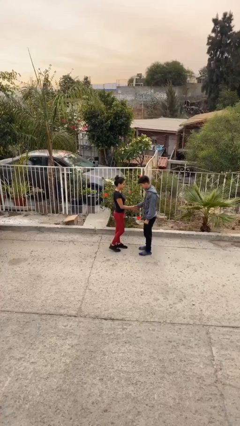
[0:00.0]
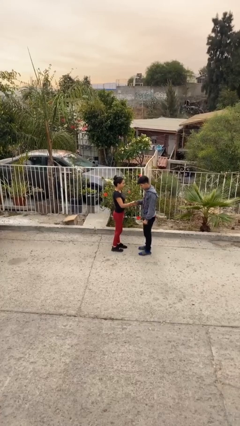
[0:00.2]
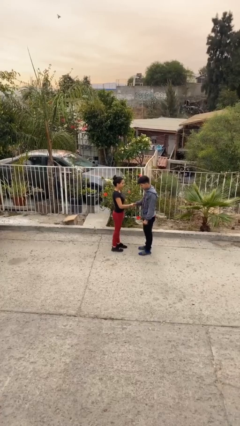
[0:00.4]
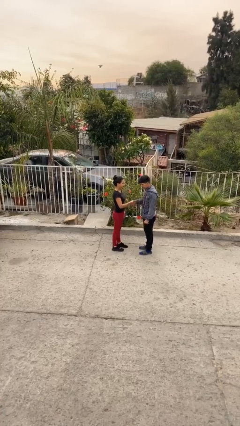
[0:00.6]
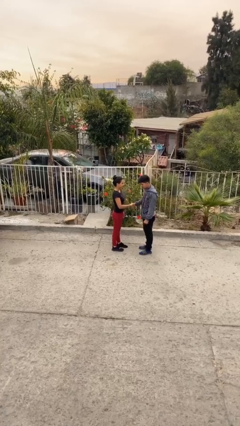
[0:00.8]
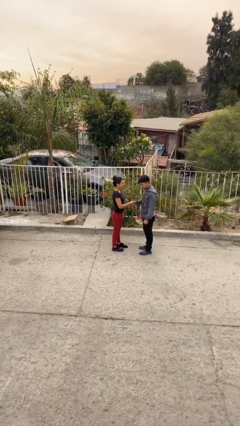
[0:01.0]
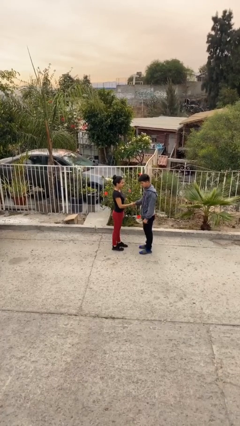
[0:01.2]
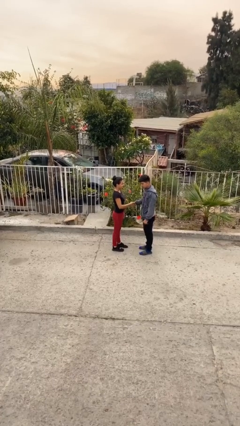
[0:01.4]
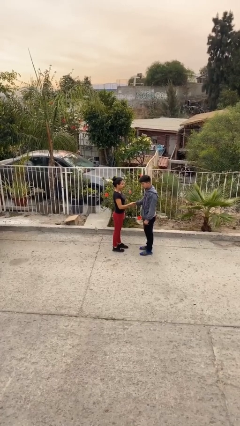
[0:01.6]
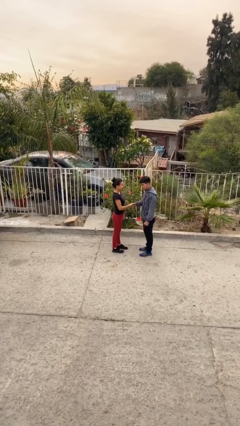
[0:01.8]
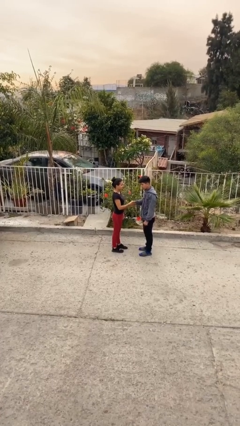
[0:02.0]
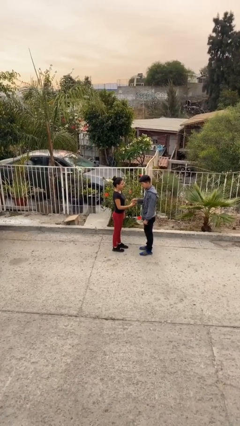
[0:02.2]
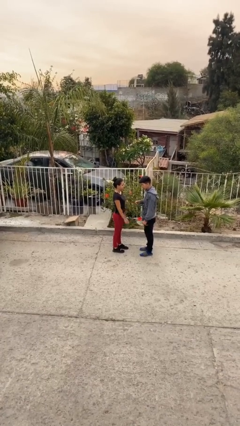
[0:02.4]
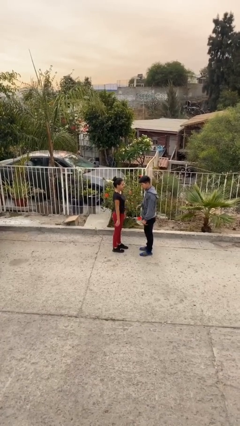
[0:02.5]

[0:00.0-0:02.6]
person shakes hand

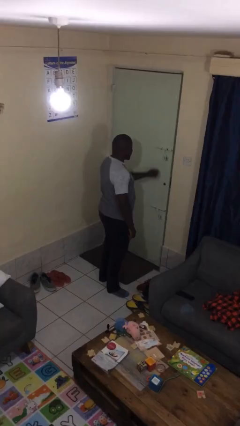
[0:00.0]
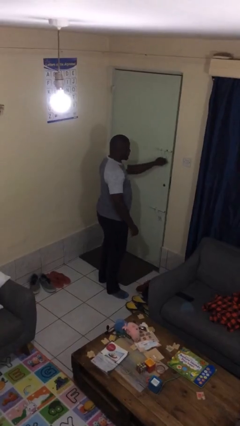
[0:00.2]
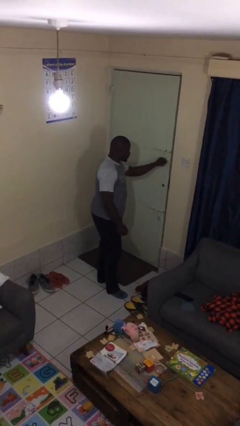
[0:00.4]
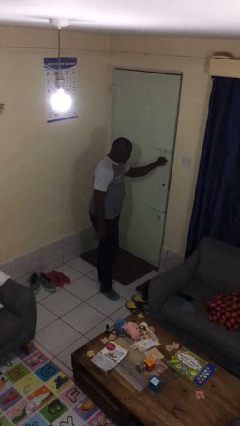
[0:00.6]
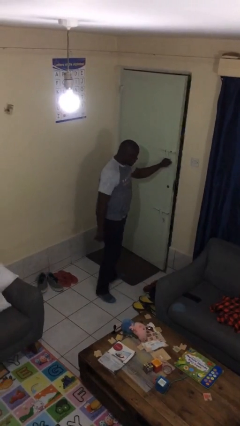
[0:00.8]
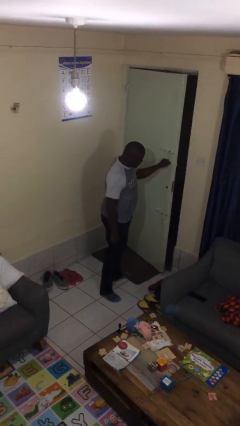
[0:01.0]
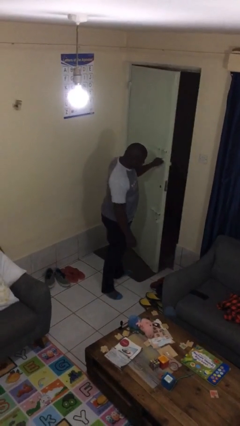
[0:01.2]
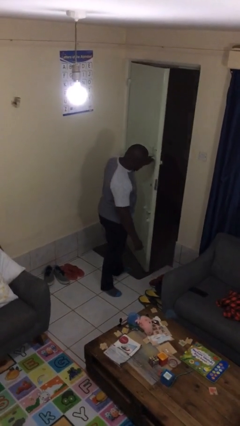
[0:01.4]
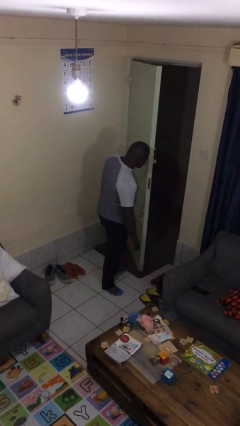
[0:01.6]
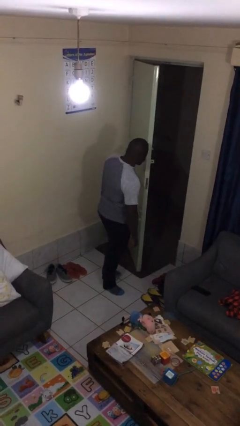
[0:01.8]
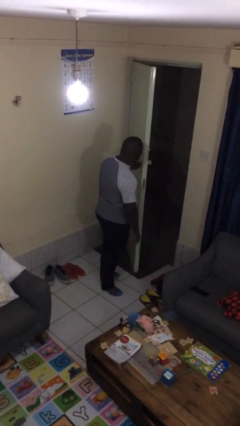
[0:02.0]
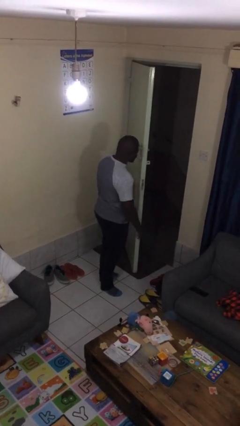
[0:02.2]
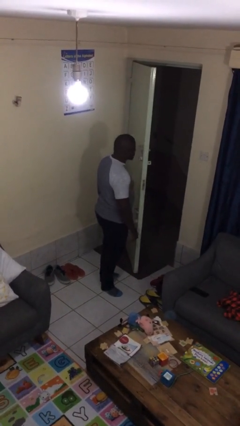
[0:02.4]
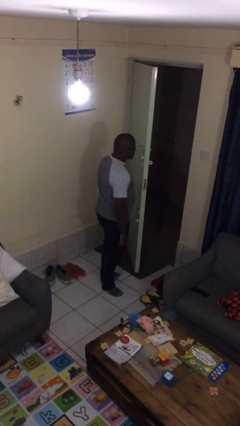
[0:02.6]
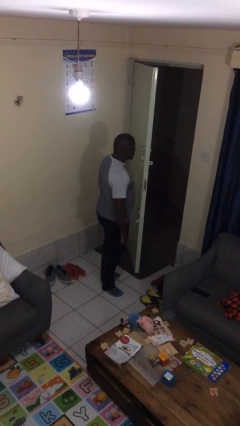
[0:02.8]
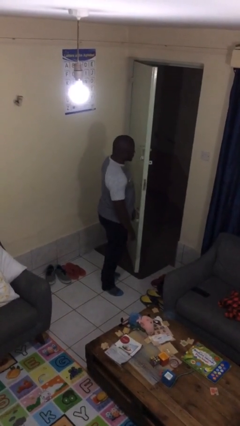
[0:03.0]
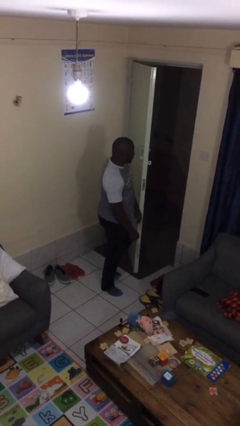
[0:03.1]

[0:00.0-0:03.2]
person opens facility door

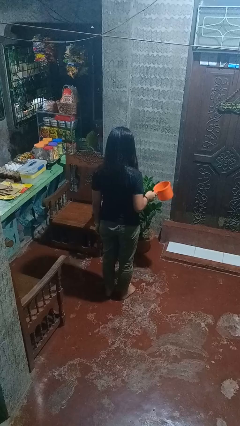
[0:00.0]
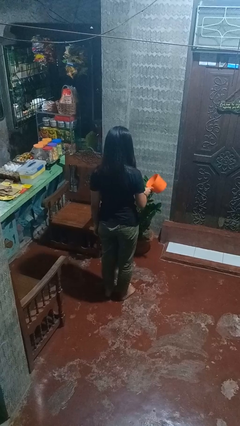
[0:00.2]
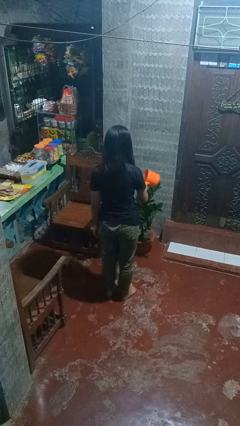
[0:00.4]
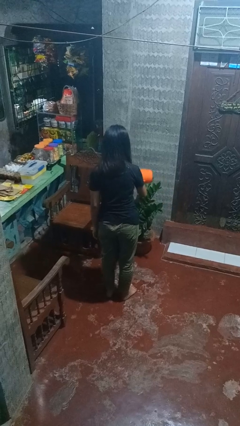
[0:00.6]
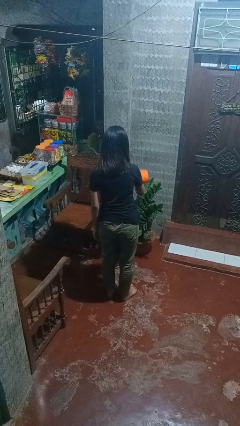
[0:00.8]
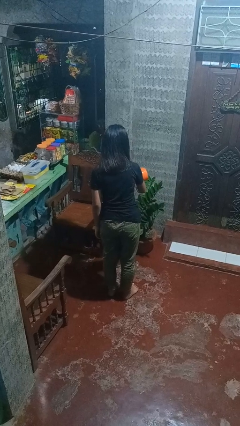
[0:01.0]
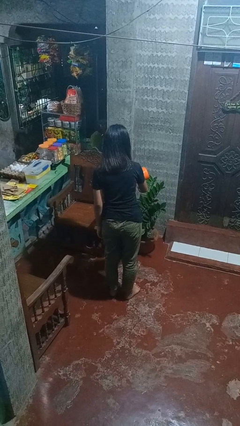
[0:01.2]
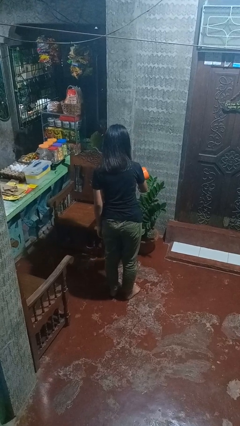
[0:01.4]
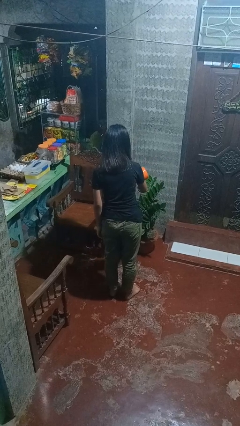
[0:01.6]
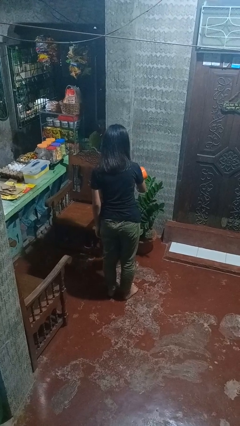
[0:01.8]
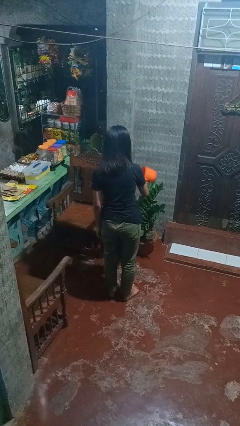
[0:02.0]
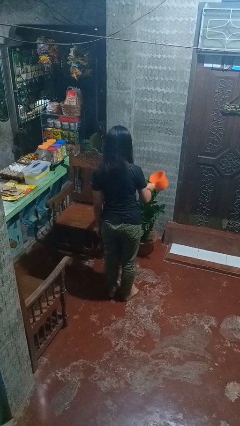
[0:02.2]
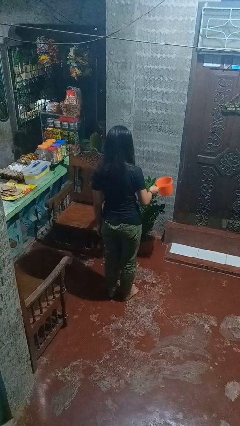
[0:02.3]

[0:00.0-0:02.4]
person waters houseplant

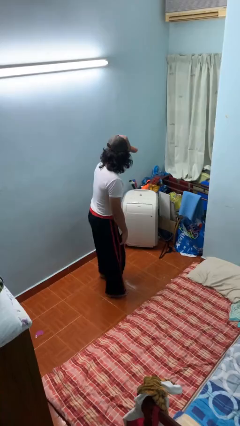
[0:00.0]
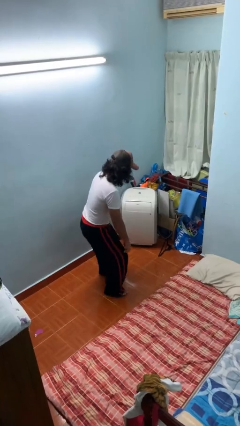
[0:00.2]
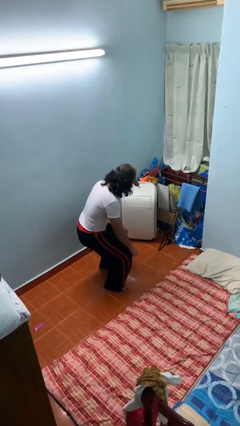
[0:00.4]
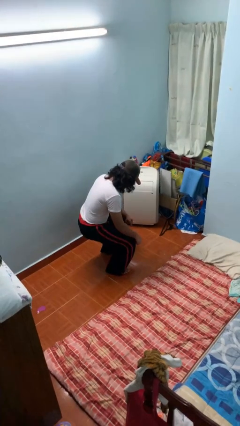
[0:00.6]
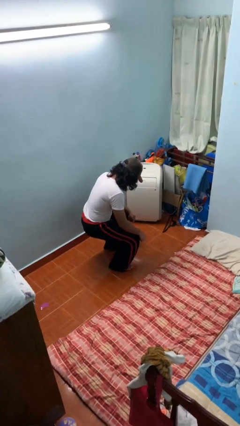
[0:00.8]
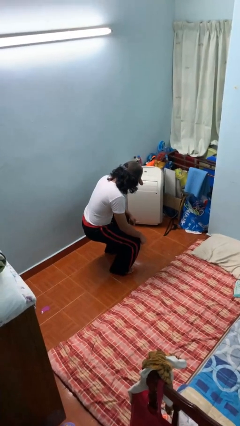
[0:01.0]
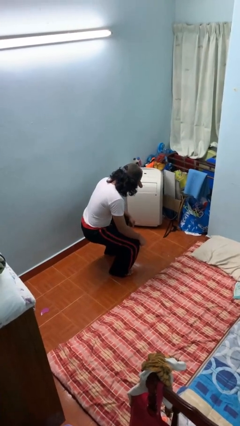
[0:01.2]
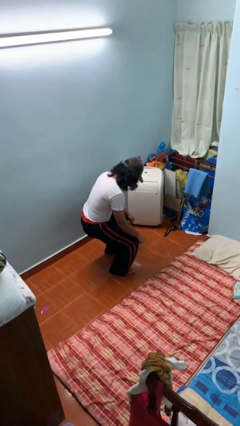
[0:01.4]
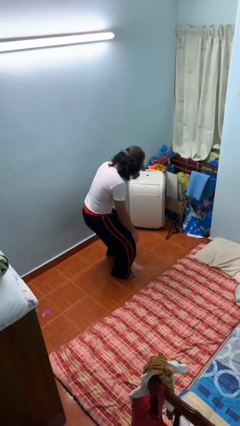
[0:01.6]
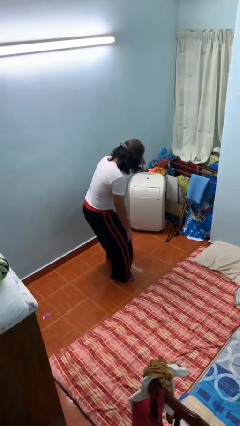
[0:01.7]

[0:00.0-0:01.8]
person squats

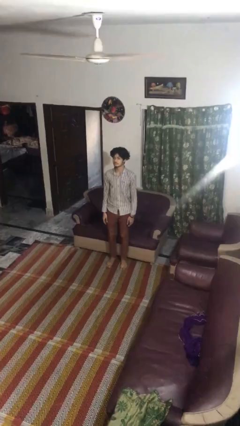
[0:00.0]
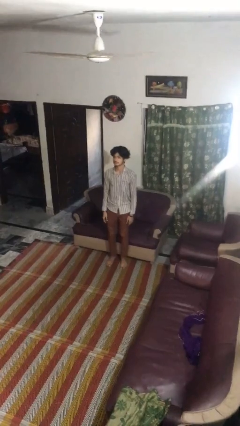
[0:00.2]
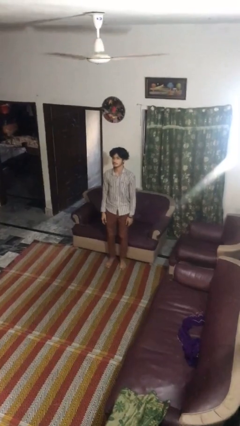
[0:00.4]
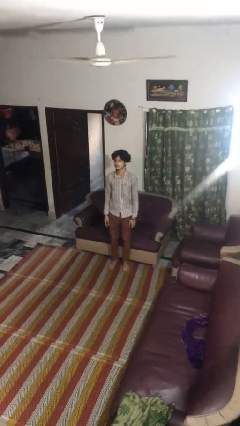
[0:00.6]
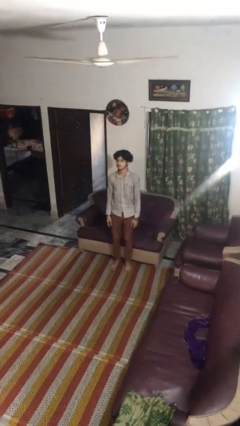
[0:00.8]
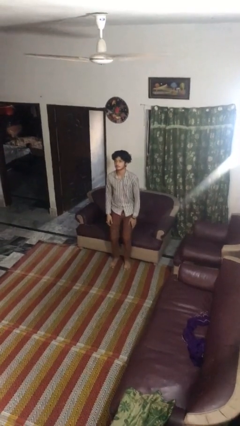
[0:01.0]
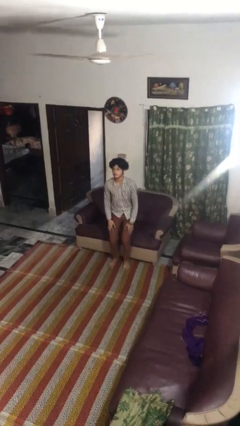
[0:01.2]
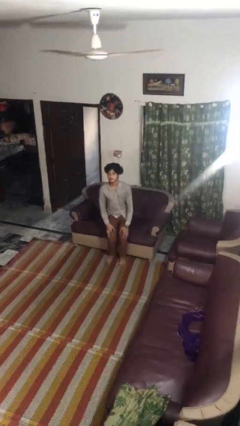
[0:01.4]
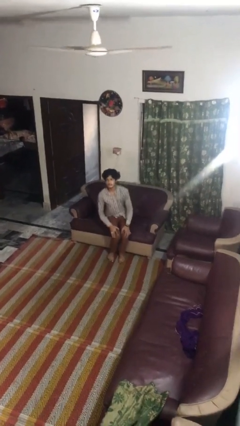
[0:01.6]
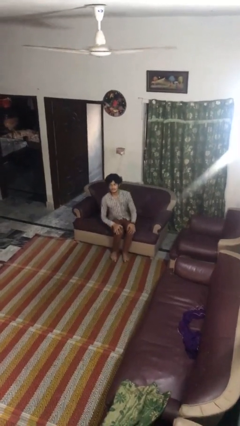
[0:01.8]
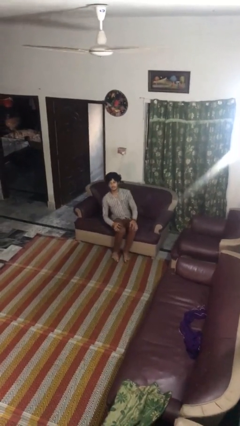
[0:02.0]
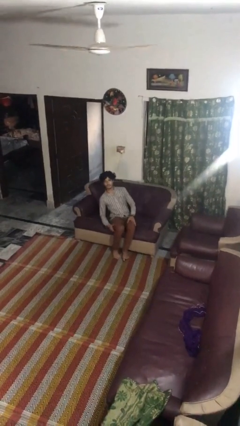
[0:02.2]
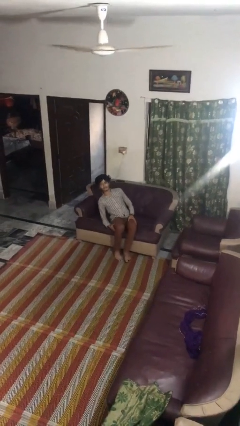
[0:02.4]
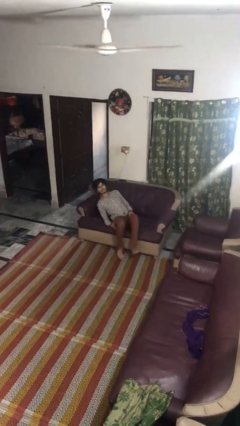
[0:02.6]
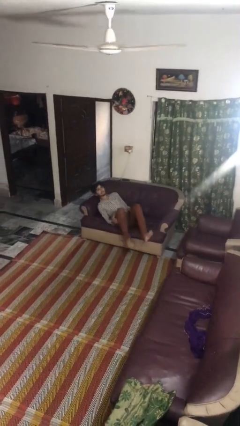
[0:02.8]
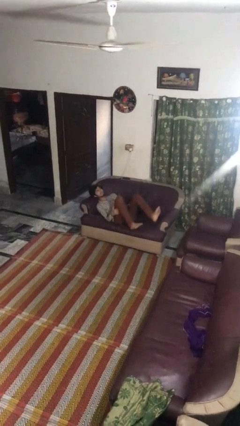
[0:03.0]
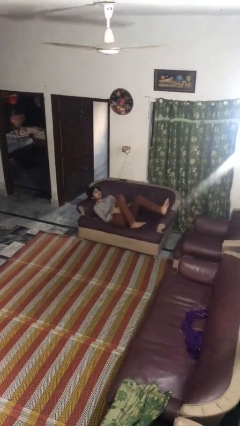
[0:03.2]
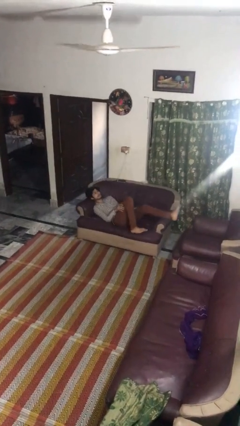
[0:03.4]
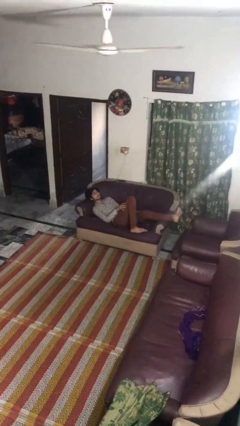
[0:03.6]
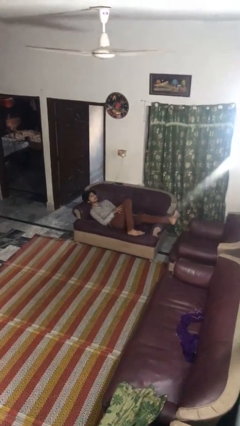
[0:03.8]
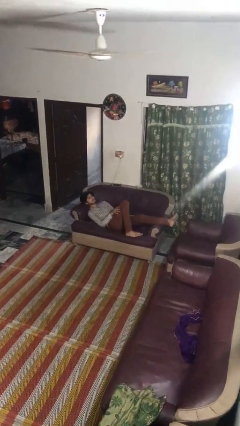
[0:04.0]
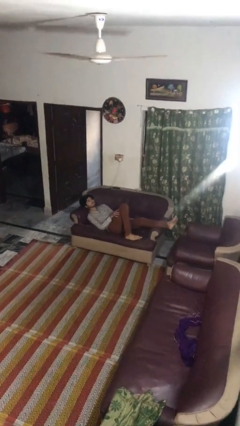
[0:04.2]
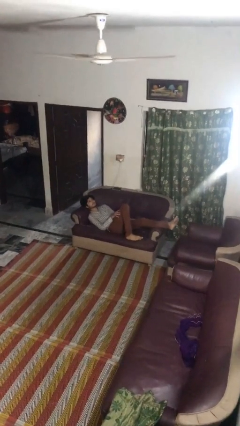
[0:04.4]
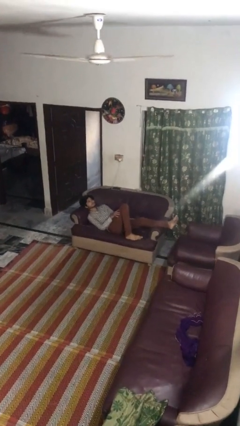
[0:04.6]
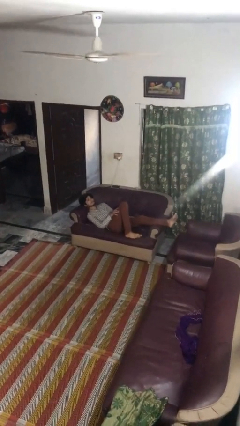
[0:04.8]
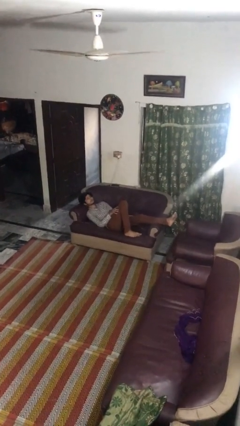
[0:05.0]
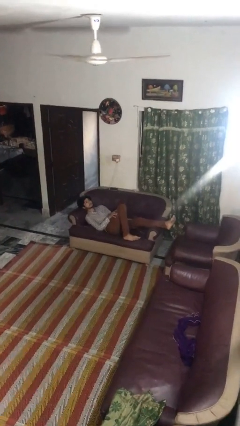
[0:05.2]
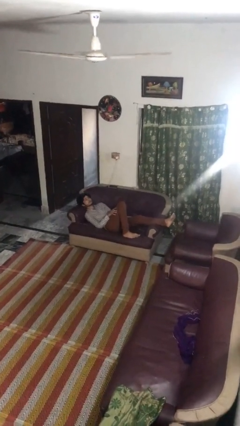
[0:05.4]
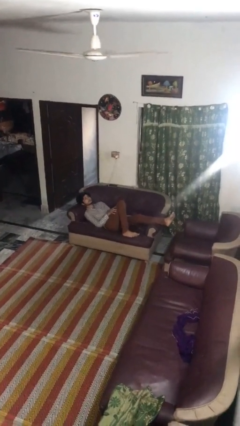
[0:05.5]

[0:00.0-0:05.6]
person lies down on couch

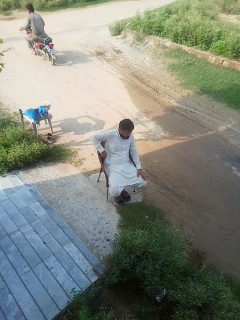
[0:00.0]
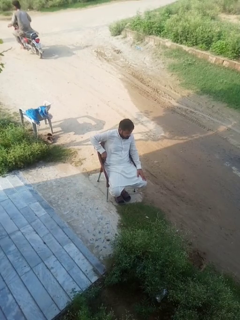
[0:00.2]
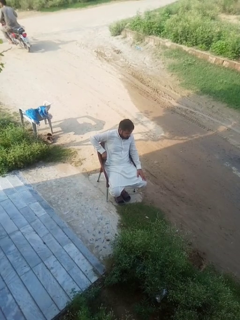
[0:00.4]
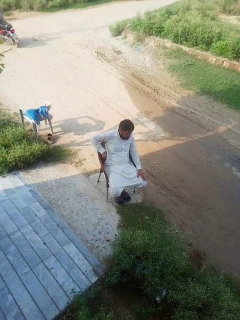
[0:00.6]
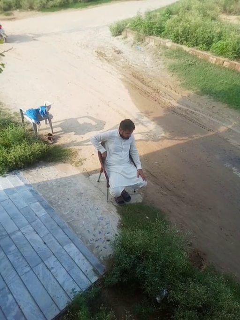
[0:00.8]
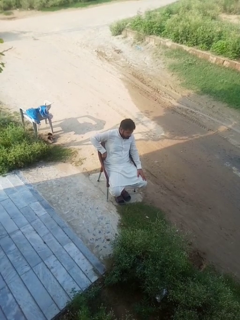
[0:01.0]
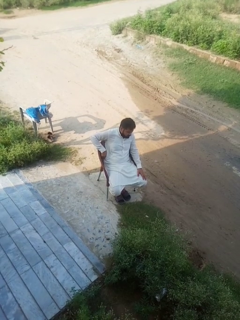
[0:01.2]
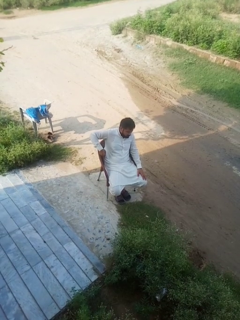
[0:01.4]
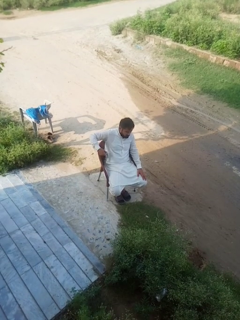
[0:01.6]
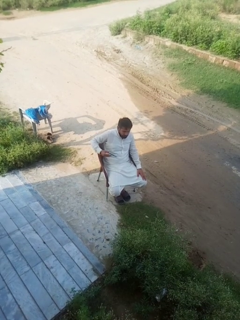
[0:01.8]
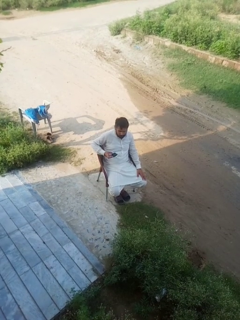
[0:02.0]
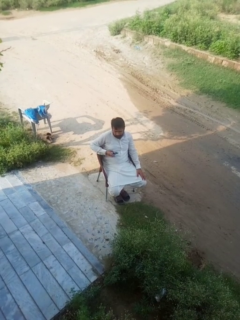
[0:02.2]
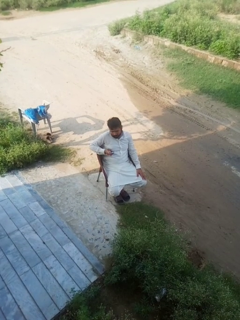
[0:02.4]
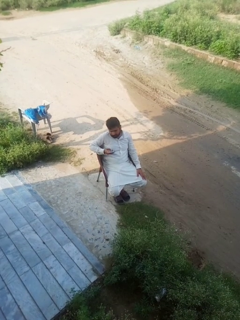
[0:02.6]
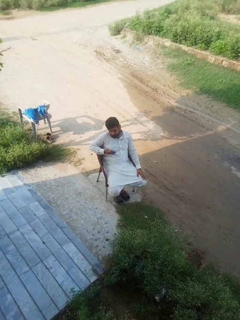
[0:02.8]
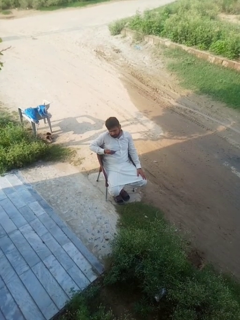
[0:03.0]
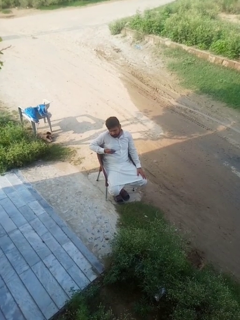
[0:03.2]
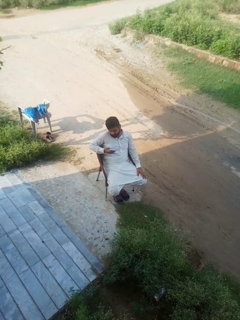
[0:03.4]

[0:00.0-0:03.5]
person takes phone from pocket
